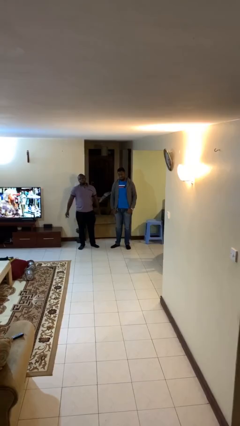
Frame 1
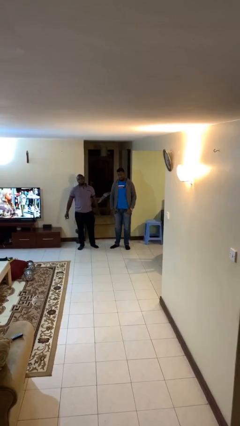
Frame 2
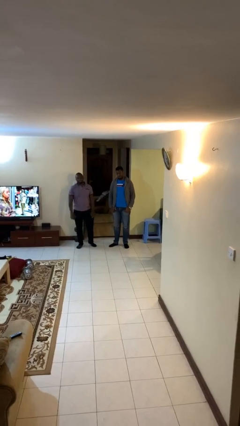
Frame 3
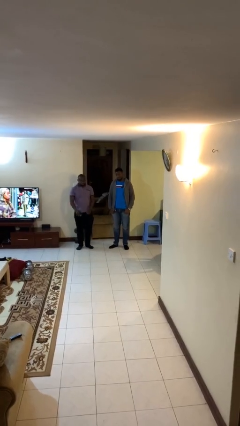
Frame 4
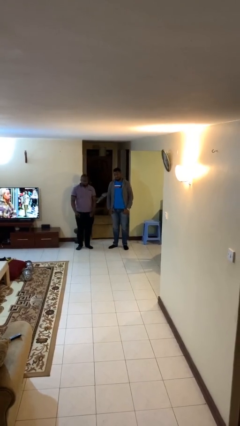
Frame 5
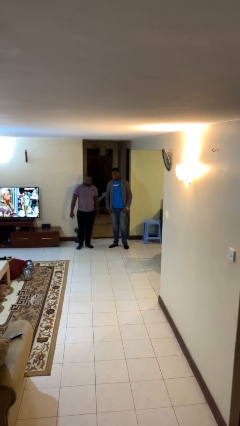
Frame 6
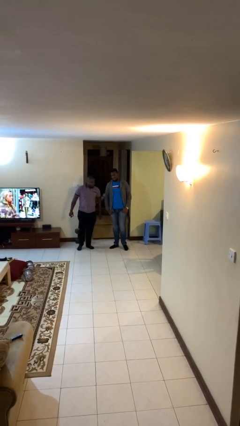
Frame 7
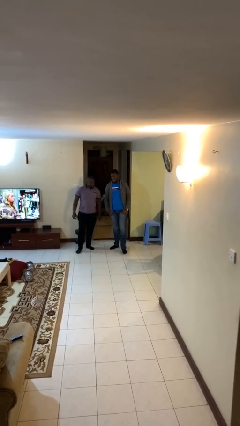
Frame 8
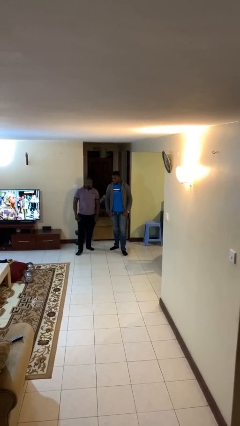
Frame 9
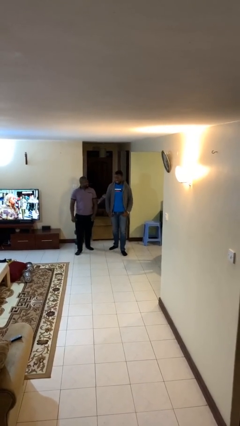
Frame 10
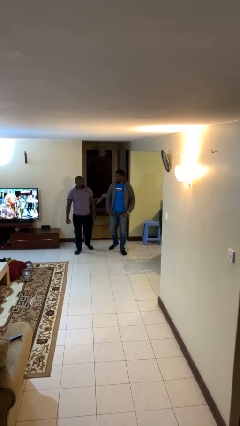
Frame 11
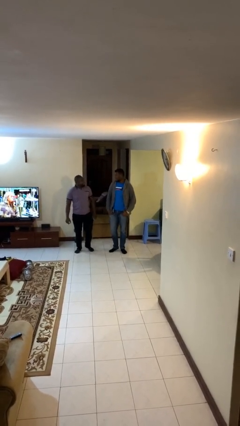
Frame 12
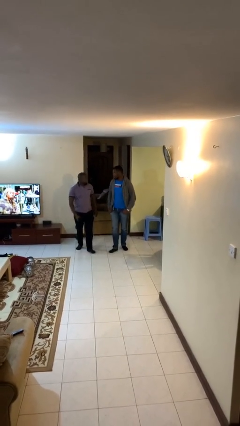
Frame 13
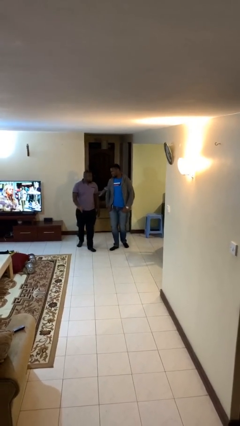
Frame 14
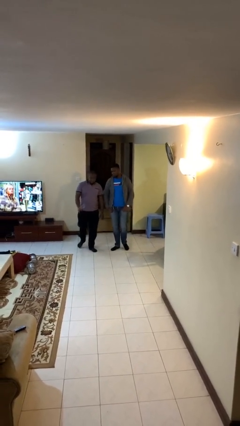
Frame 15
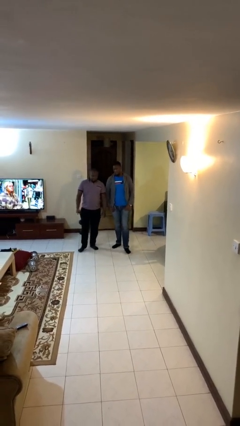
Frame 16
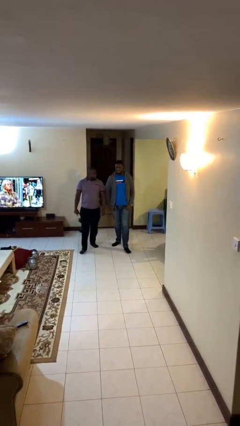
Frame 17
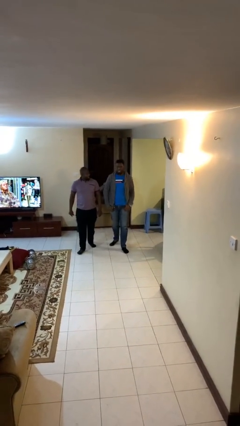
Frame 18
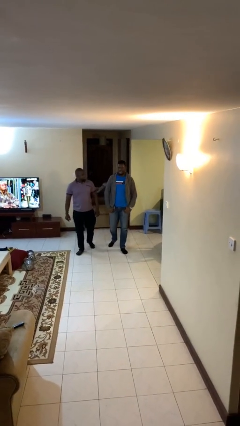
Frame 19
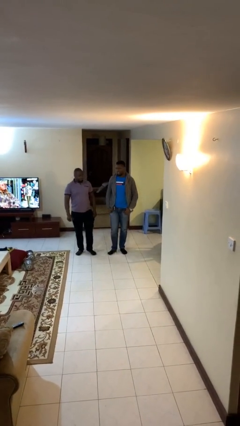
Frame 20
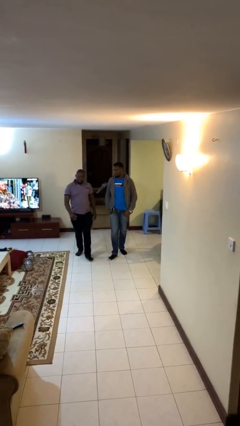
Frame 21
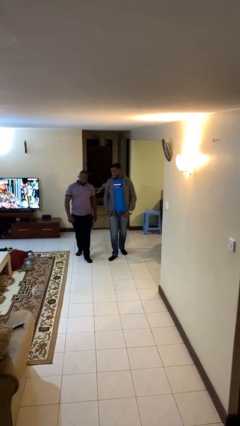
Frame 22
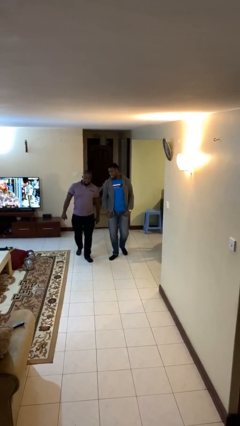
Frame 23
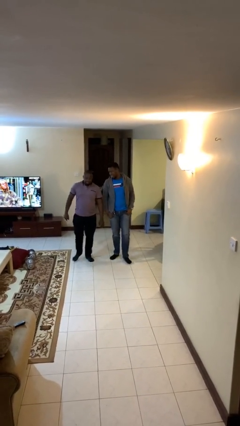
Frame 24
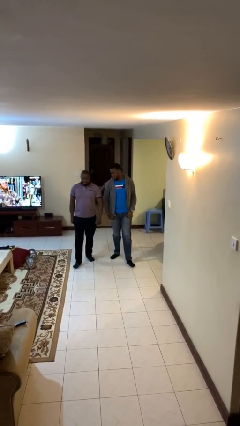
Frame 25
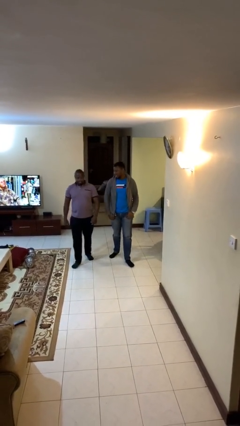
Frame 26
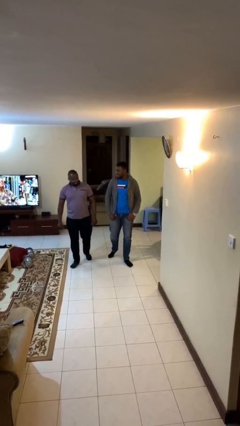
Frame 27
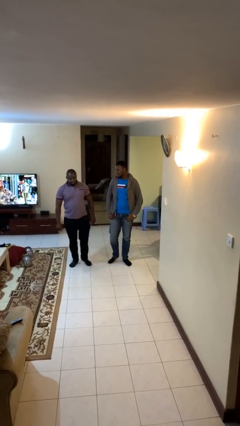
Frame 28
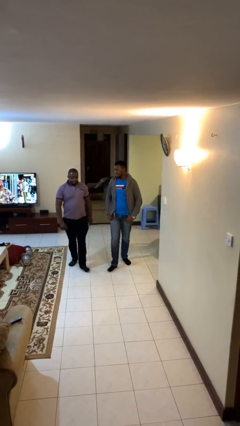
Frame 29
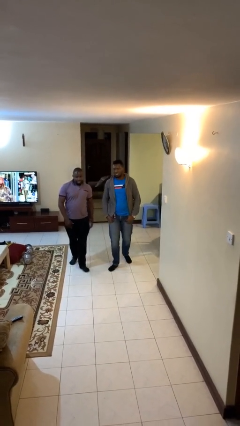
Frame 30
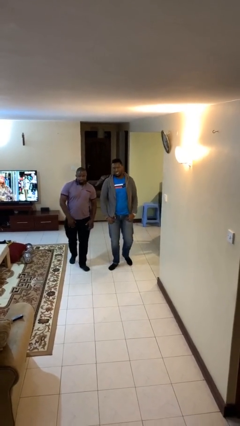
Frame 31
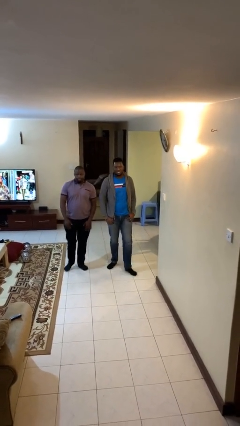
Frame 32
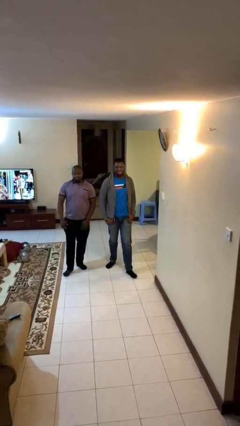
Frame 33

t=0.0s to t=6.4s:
person talks to person

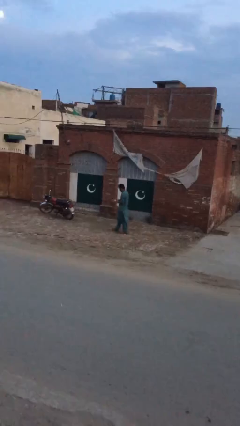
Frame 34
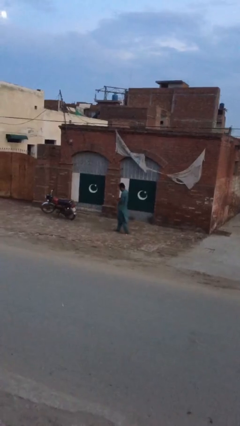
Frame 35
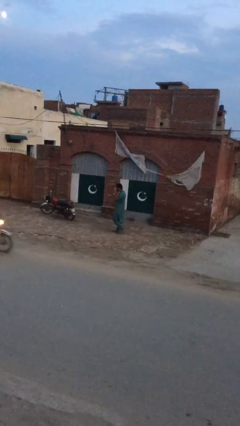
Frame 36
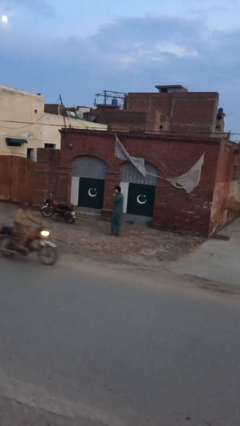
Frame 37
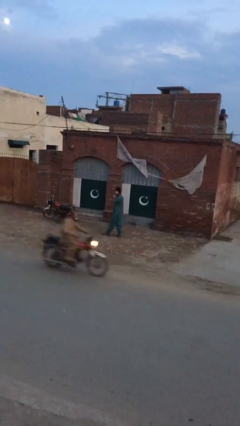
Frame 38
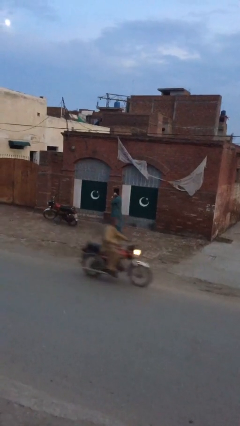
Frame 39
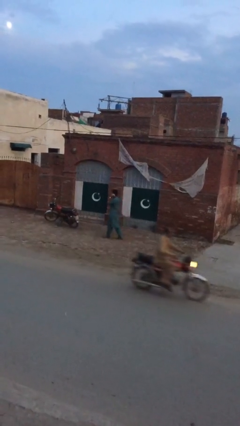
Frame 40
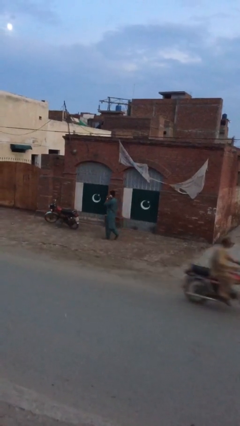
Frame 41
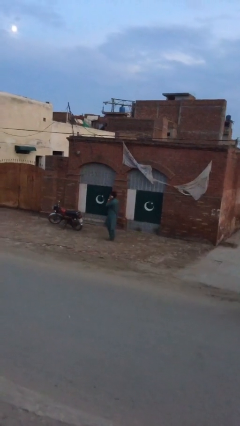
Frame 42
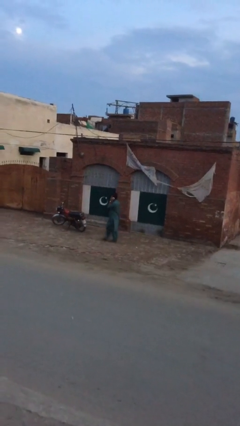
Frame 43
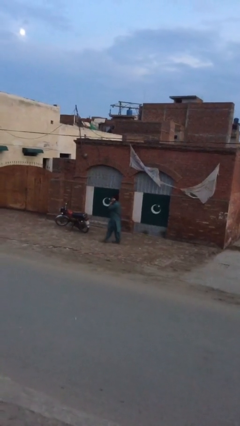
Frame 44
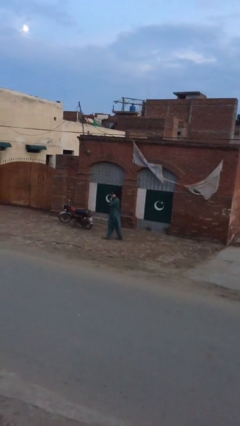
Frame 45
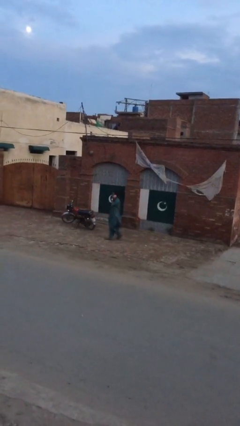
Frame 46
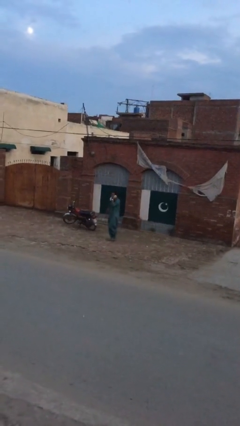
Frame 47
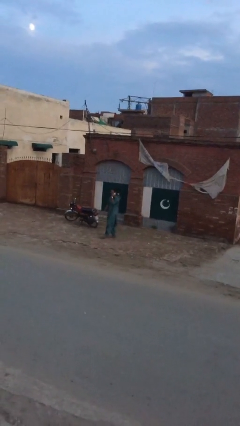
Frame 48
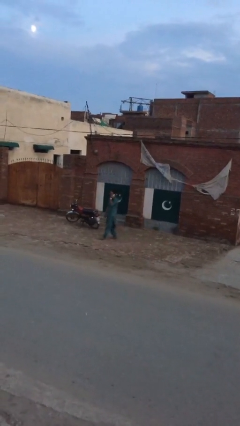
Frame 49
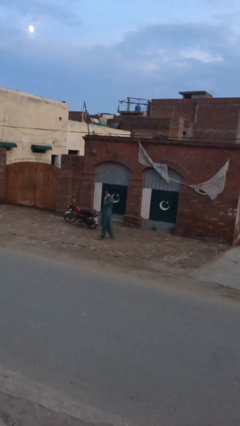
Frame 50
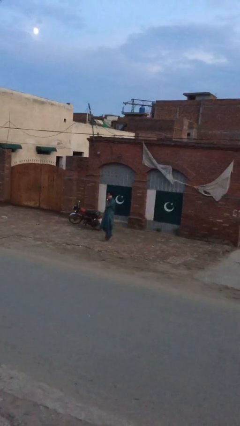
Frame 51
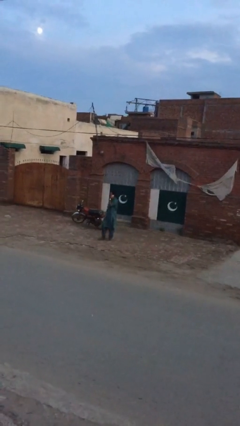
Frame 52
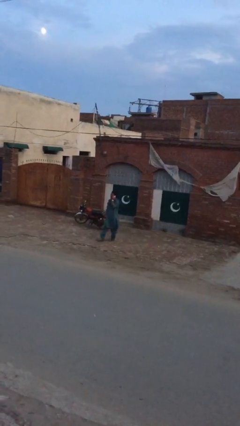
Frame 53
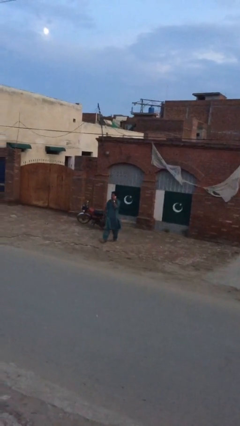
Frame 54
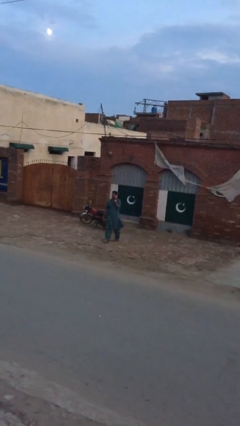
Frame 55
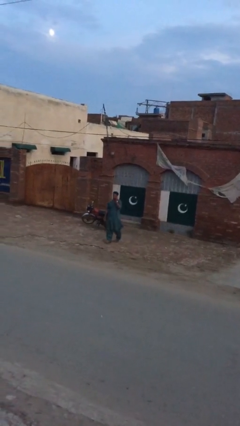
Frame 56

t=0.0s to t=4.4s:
person talks on phone

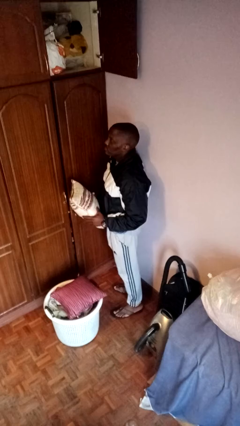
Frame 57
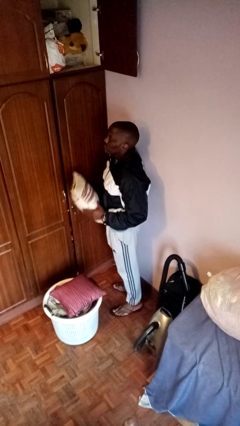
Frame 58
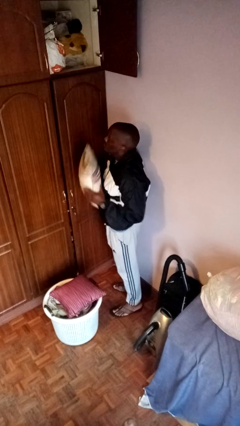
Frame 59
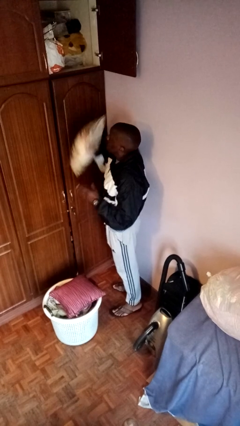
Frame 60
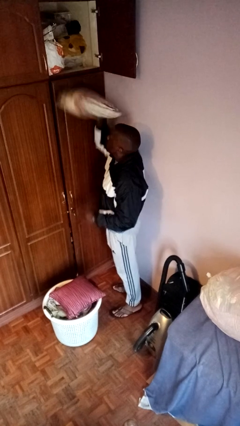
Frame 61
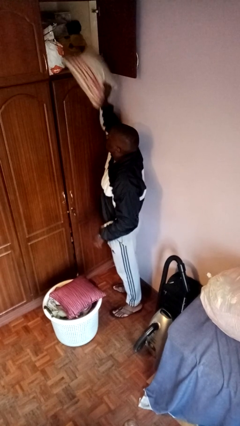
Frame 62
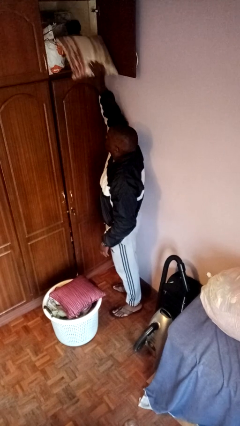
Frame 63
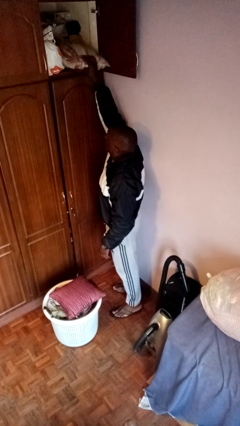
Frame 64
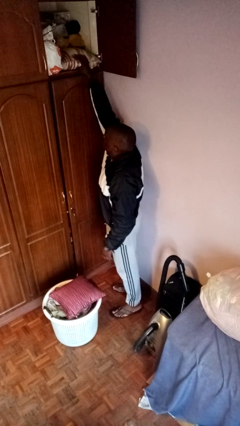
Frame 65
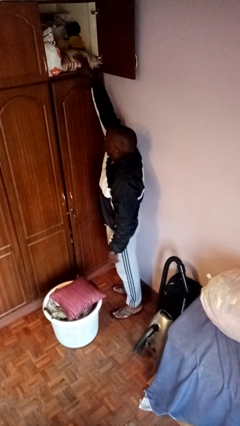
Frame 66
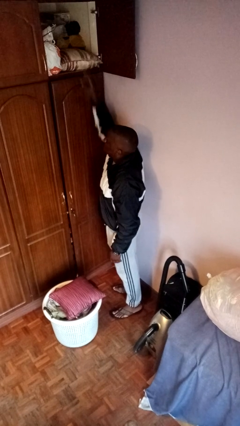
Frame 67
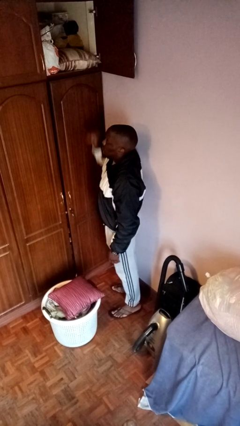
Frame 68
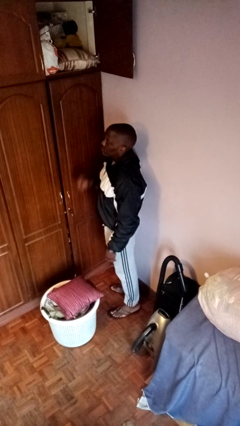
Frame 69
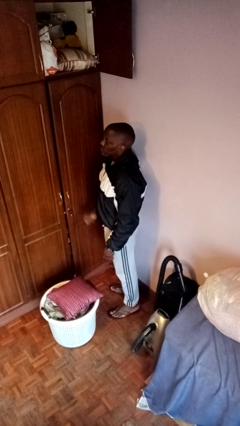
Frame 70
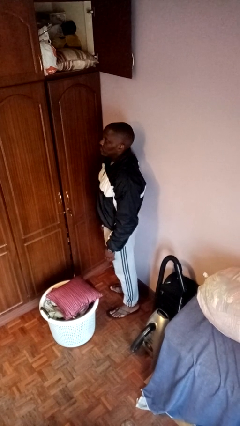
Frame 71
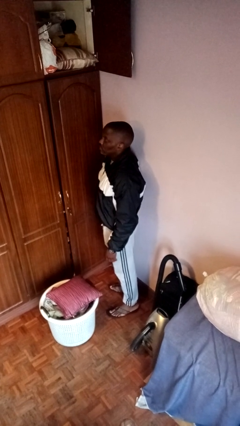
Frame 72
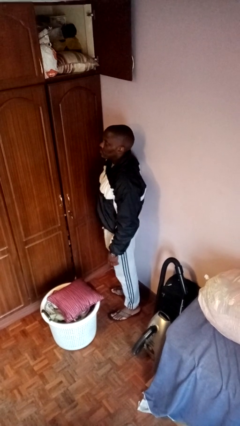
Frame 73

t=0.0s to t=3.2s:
person puts down object on shelf

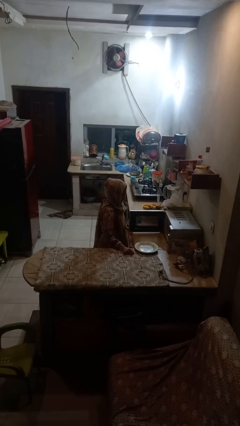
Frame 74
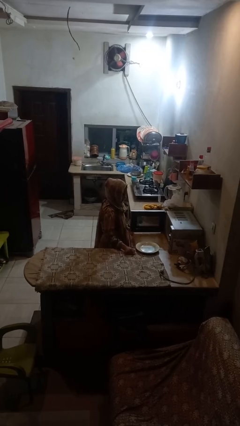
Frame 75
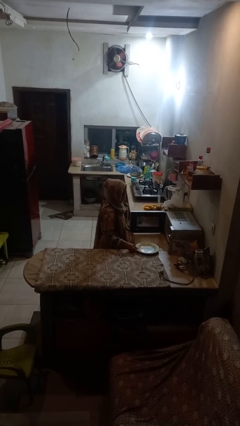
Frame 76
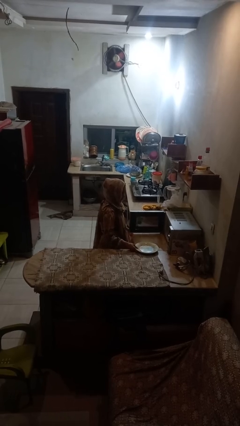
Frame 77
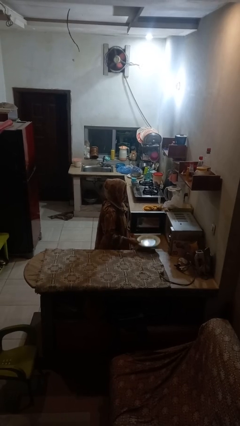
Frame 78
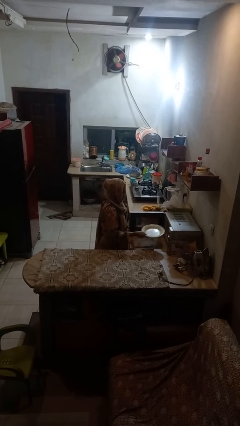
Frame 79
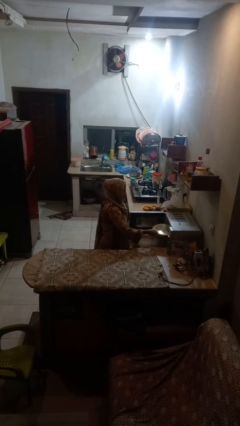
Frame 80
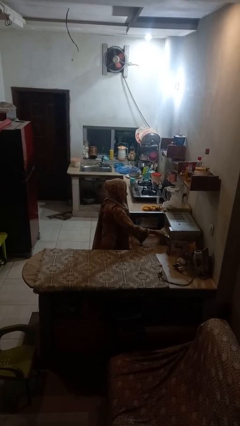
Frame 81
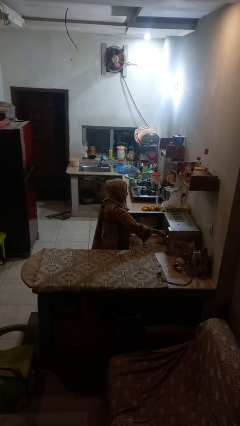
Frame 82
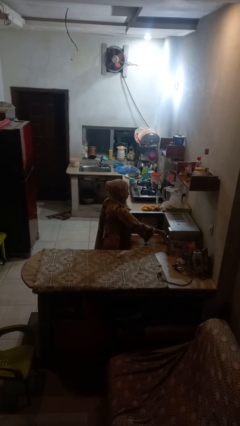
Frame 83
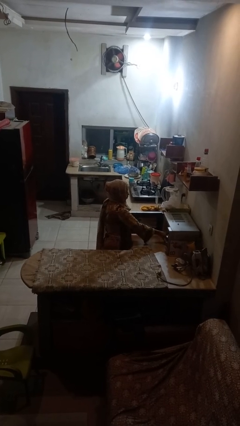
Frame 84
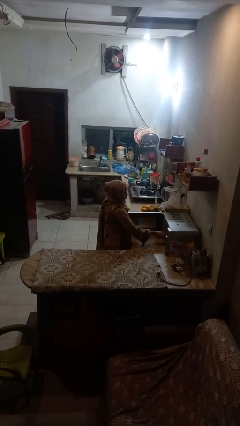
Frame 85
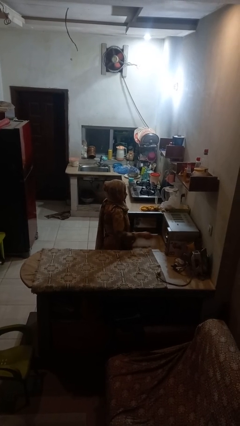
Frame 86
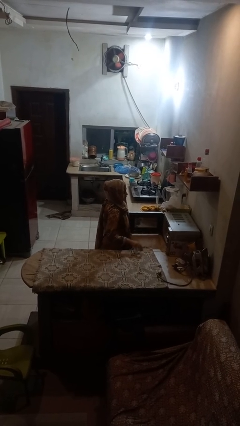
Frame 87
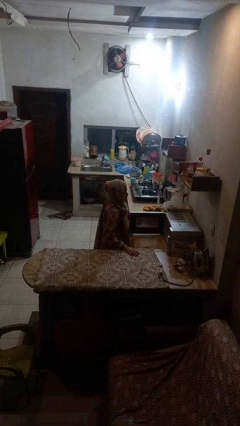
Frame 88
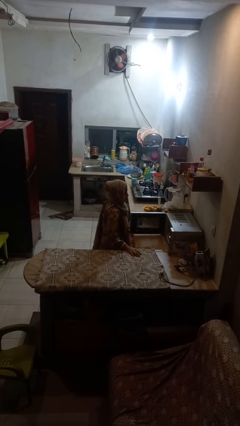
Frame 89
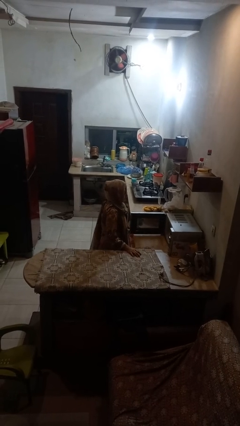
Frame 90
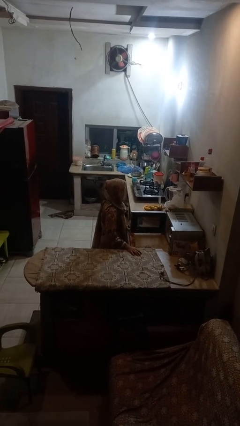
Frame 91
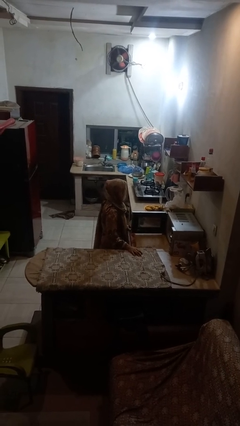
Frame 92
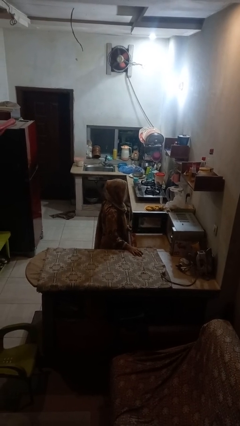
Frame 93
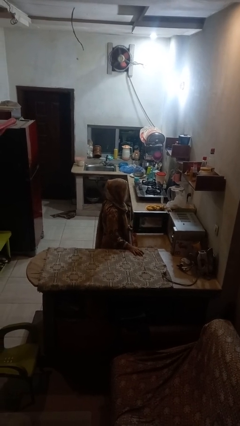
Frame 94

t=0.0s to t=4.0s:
person puts object into microwave

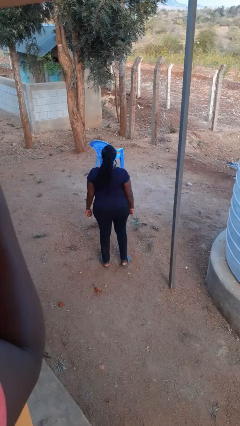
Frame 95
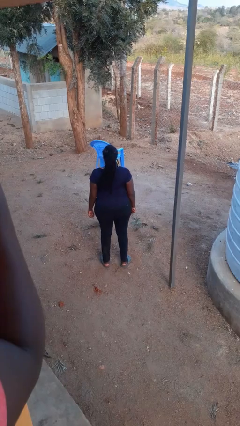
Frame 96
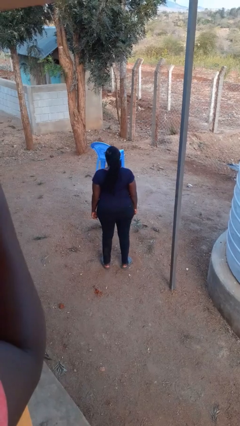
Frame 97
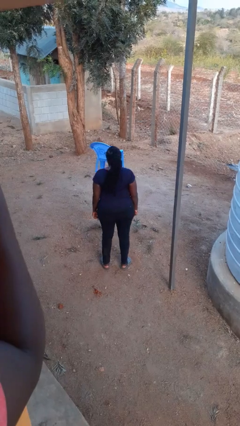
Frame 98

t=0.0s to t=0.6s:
person twirls
